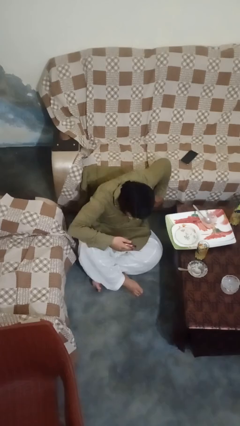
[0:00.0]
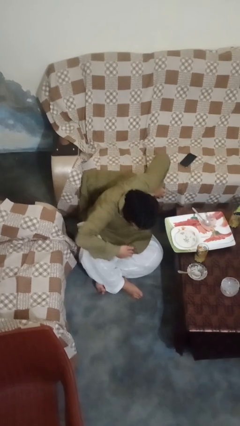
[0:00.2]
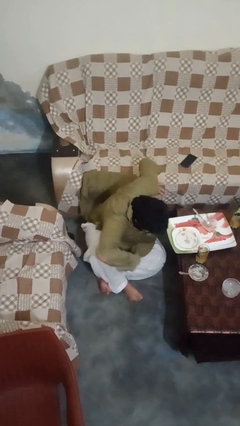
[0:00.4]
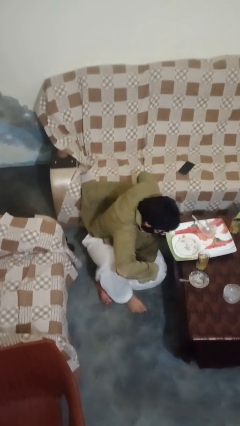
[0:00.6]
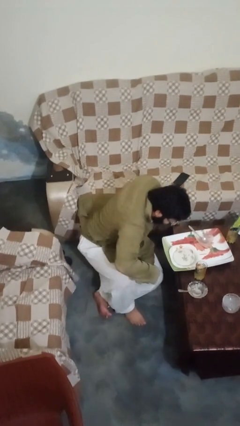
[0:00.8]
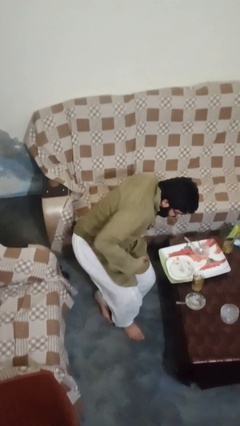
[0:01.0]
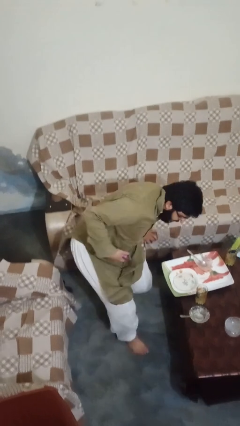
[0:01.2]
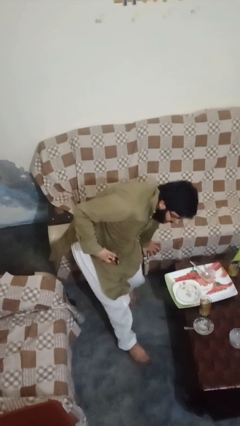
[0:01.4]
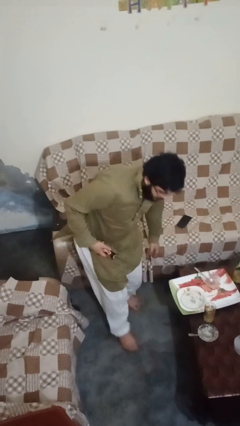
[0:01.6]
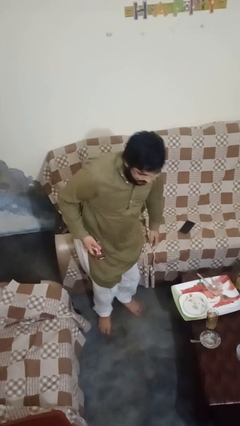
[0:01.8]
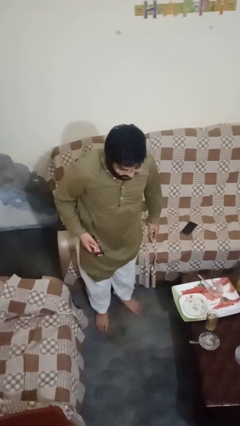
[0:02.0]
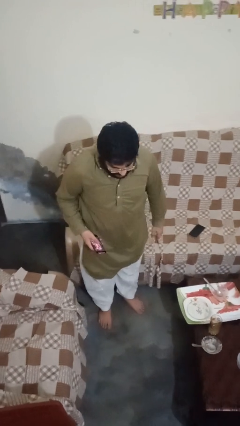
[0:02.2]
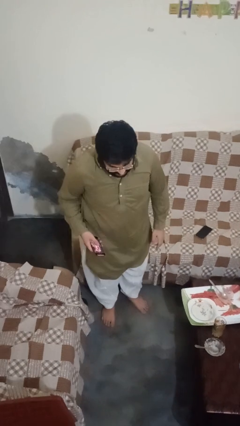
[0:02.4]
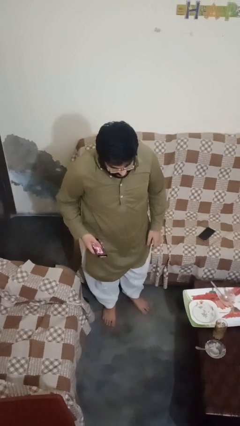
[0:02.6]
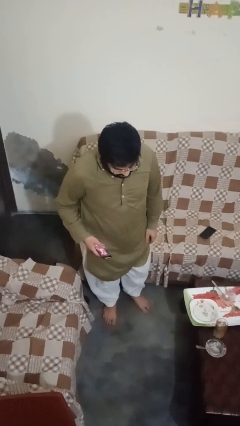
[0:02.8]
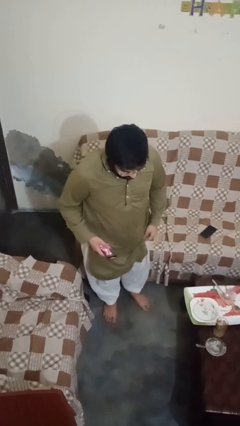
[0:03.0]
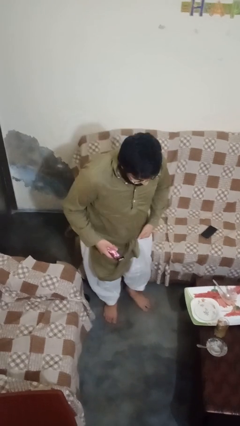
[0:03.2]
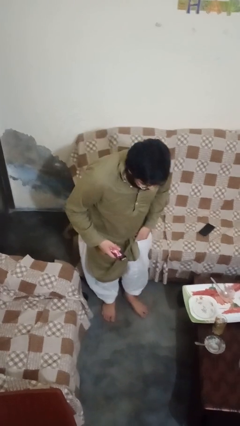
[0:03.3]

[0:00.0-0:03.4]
person stands up from floor

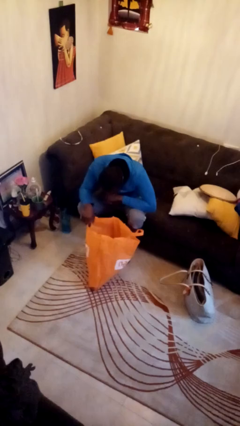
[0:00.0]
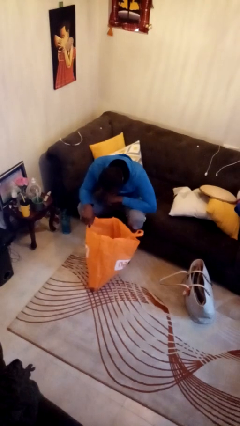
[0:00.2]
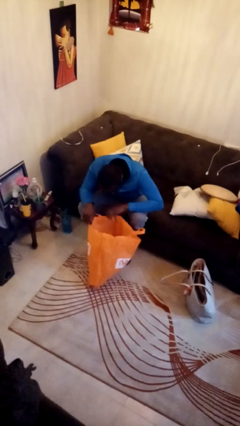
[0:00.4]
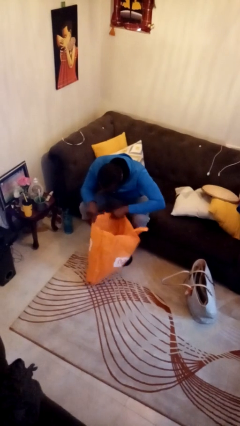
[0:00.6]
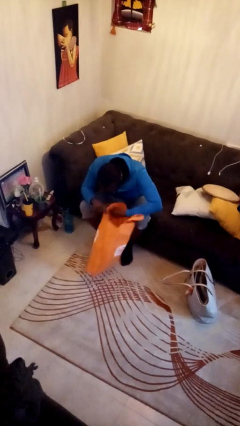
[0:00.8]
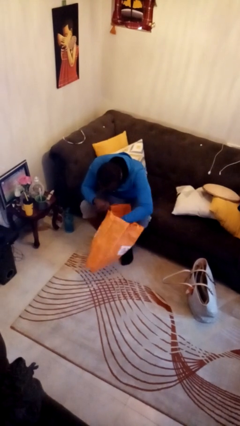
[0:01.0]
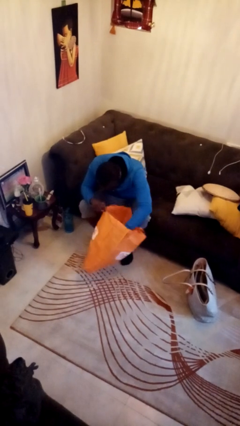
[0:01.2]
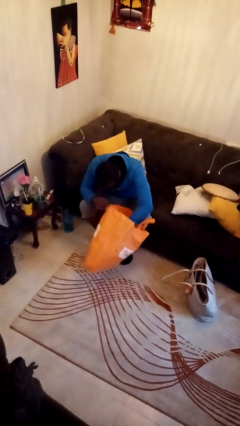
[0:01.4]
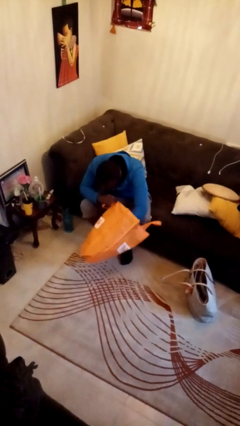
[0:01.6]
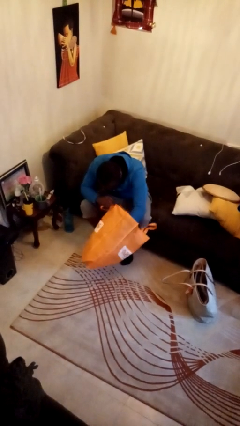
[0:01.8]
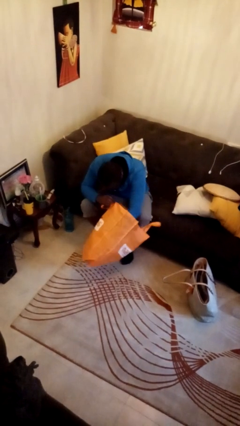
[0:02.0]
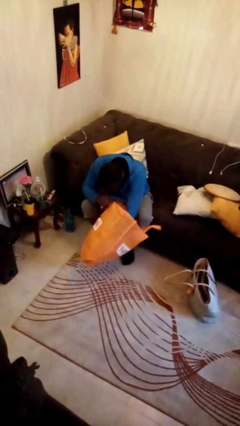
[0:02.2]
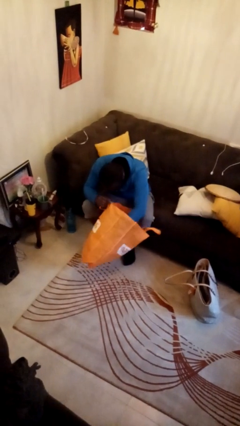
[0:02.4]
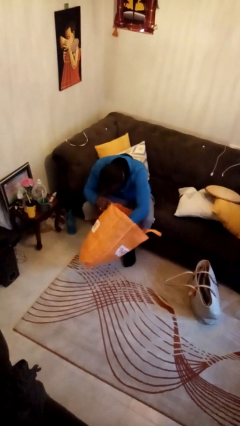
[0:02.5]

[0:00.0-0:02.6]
person searches in bag

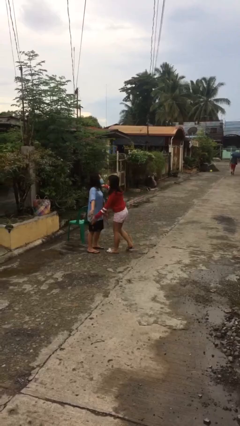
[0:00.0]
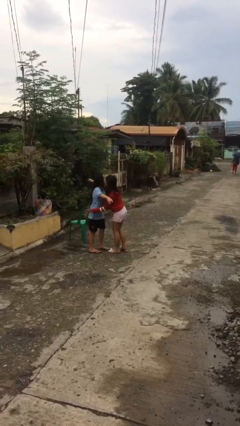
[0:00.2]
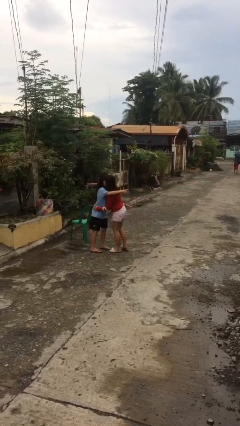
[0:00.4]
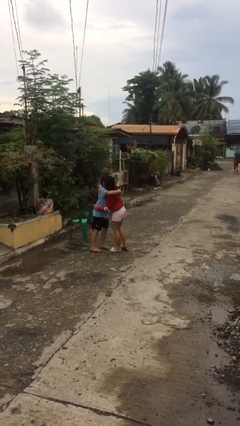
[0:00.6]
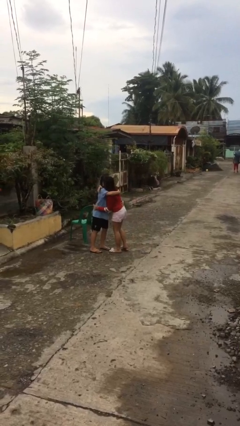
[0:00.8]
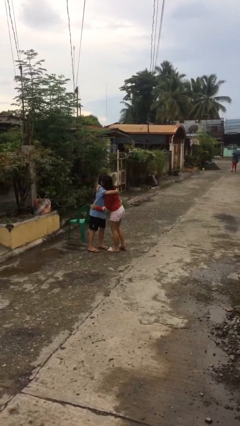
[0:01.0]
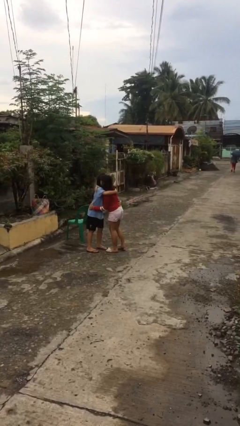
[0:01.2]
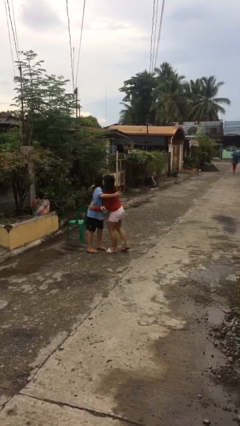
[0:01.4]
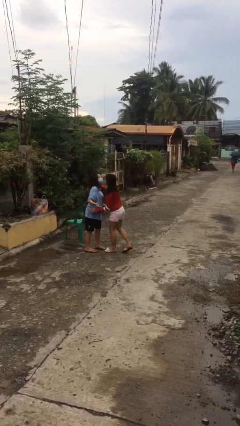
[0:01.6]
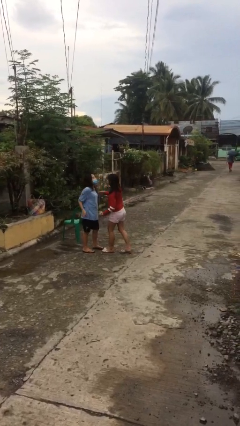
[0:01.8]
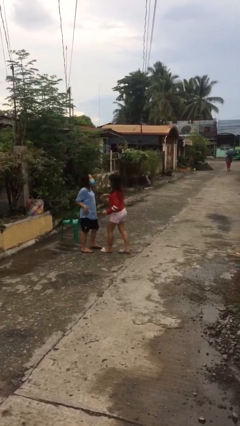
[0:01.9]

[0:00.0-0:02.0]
person embraces person

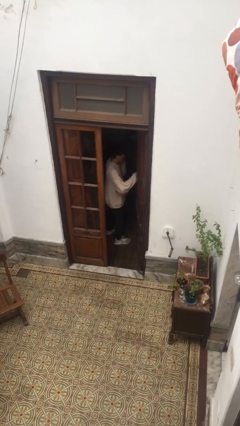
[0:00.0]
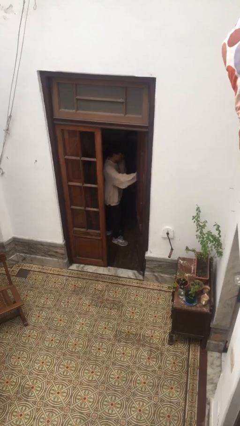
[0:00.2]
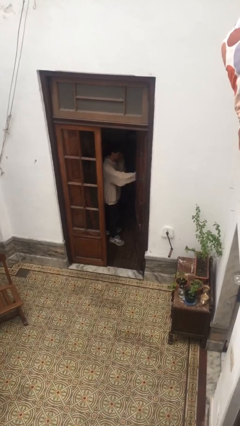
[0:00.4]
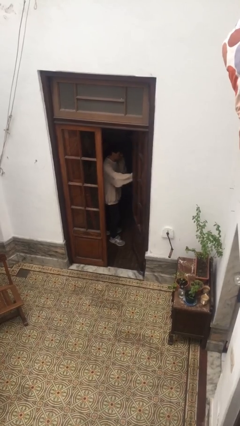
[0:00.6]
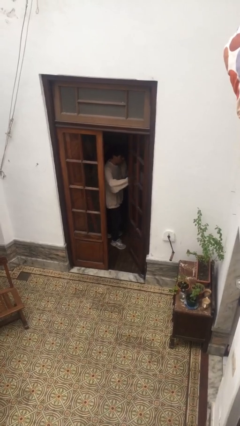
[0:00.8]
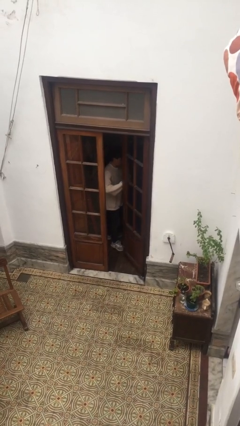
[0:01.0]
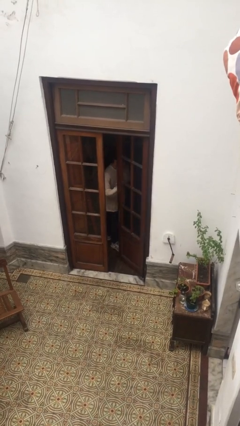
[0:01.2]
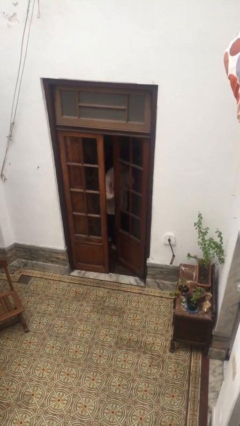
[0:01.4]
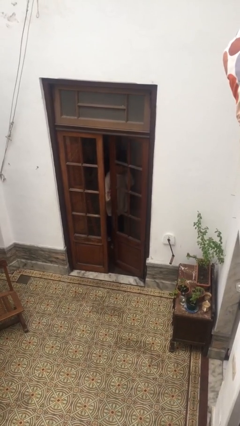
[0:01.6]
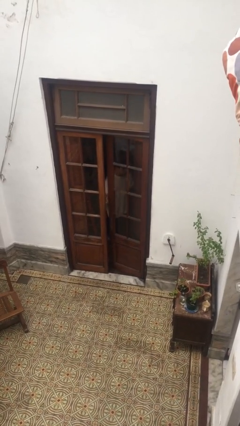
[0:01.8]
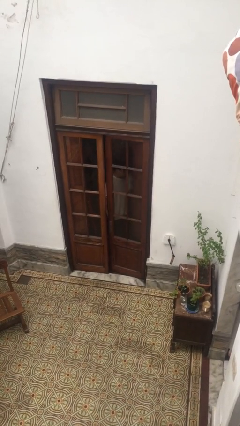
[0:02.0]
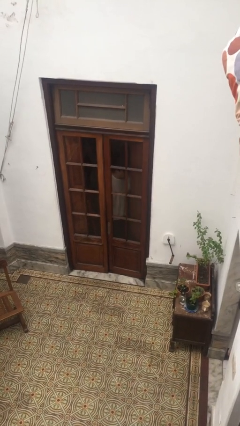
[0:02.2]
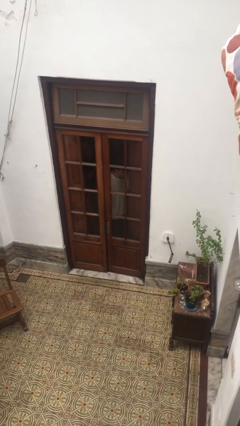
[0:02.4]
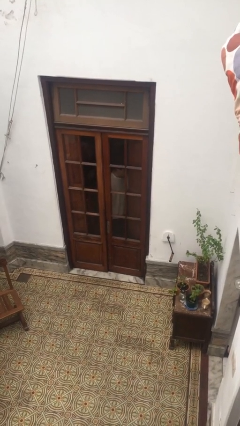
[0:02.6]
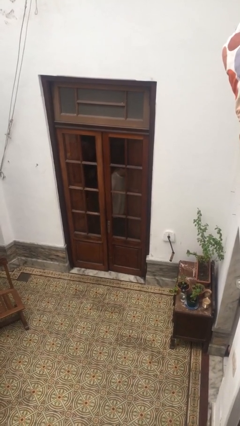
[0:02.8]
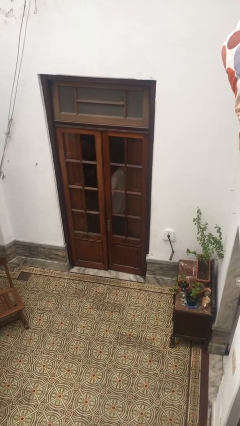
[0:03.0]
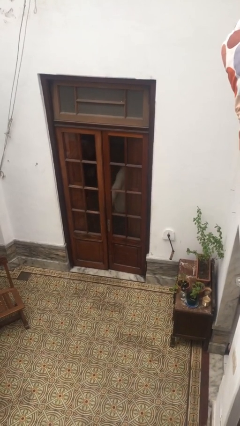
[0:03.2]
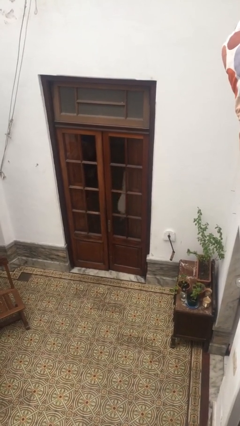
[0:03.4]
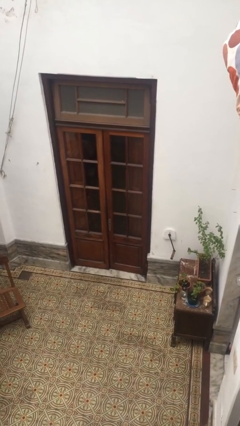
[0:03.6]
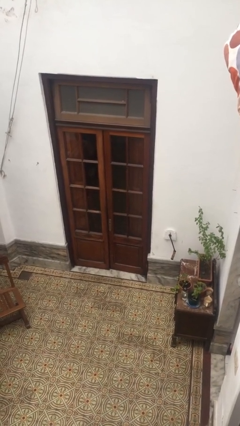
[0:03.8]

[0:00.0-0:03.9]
person closes facility door

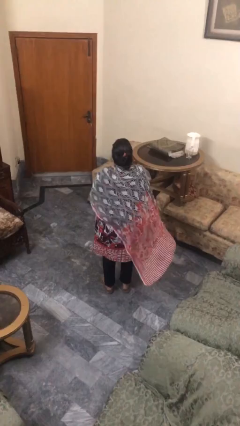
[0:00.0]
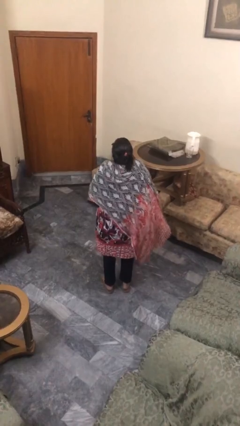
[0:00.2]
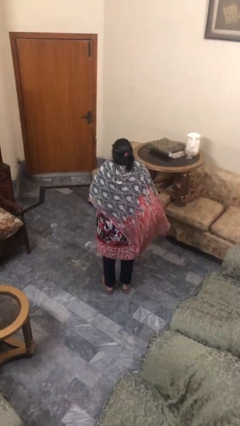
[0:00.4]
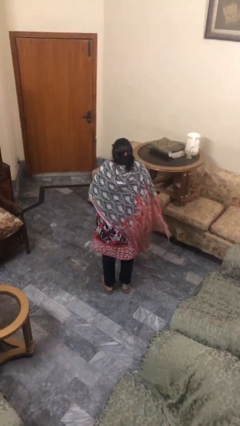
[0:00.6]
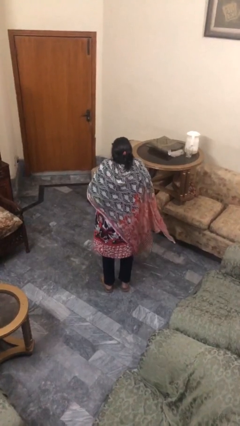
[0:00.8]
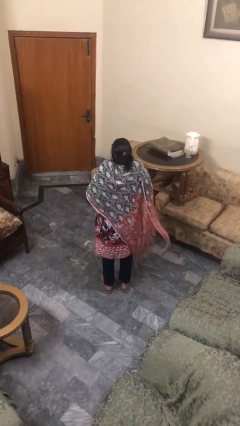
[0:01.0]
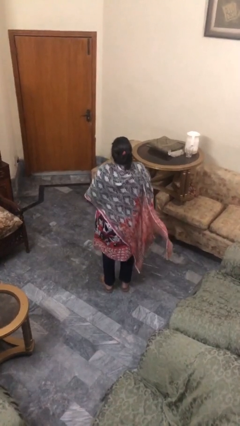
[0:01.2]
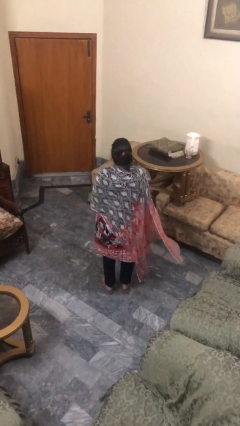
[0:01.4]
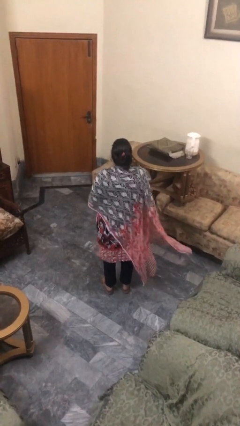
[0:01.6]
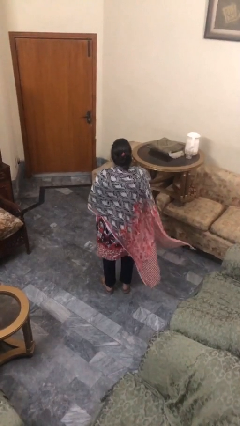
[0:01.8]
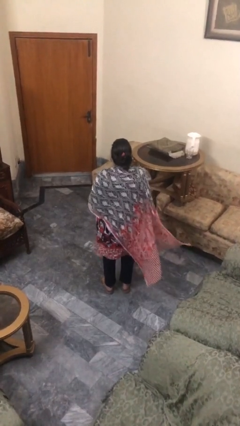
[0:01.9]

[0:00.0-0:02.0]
person shrugs

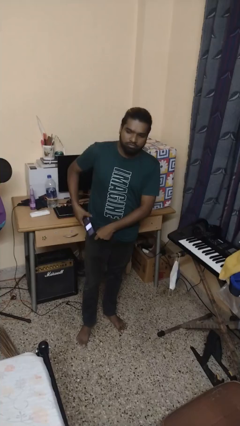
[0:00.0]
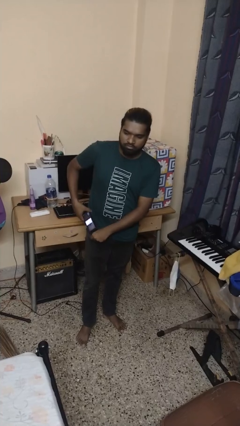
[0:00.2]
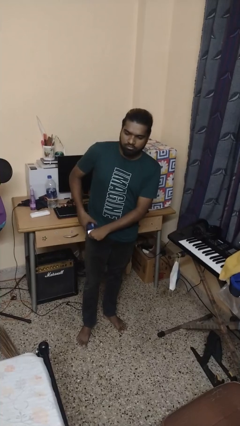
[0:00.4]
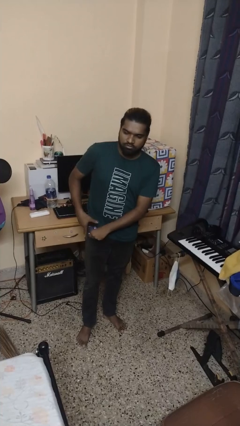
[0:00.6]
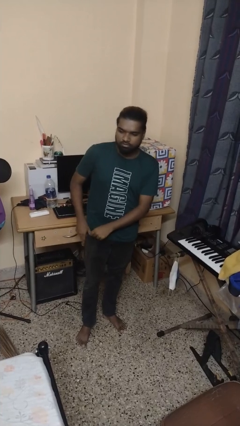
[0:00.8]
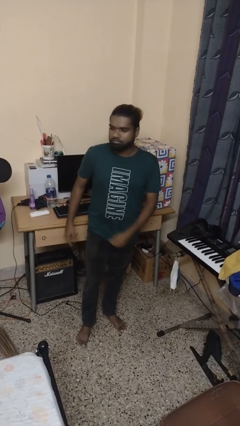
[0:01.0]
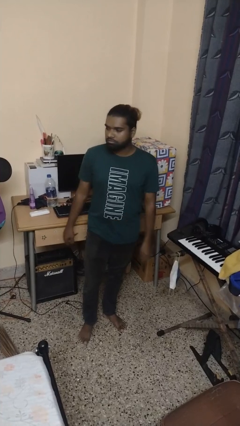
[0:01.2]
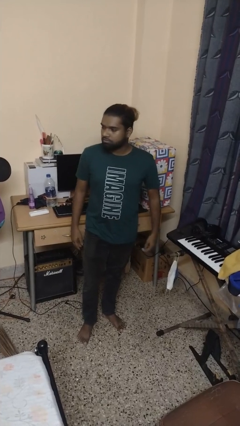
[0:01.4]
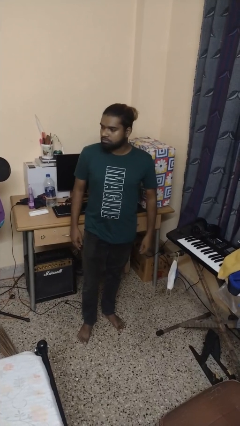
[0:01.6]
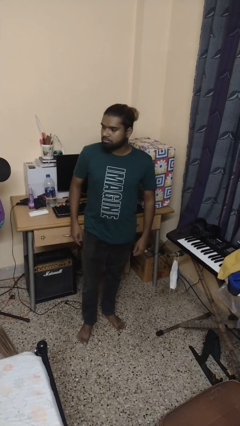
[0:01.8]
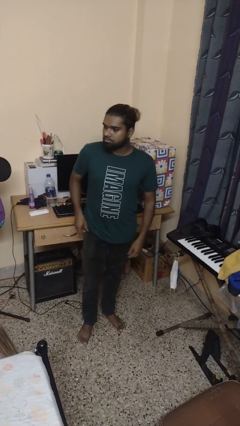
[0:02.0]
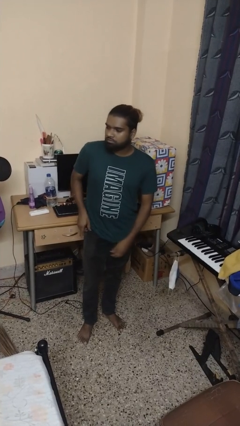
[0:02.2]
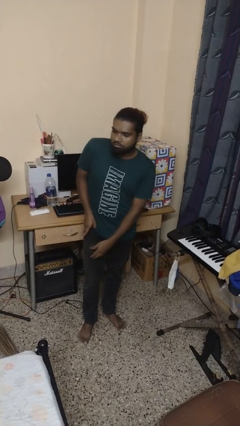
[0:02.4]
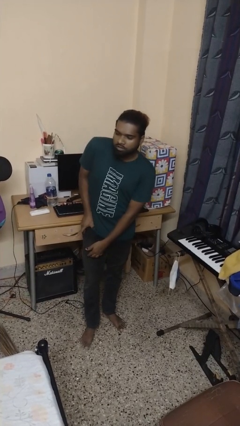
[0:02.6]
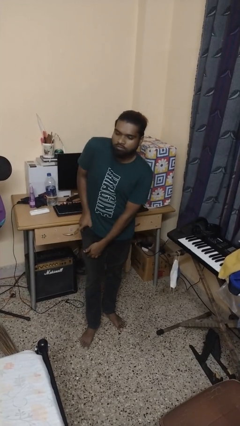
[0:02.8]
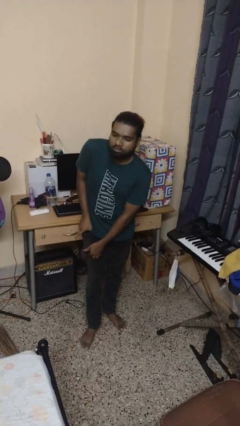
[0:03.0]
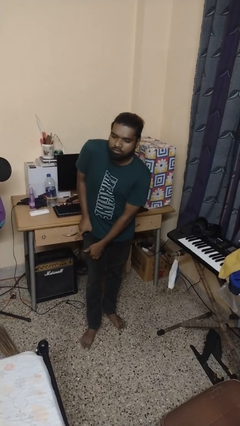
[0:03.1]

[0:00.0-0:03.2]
person puts phone into pocket

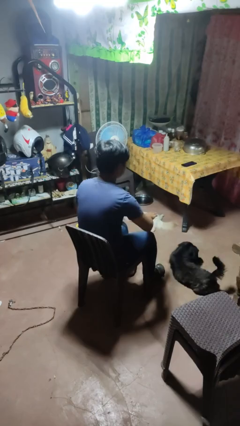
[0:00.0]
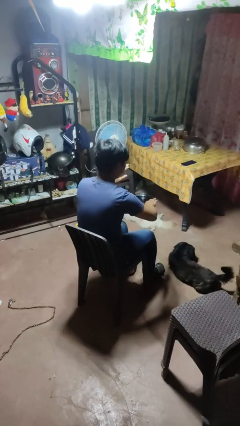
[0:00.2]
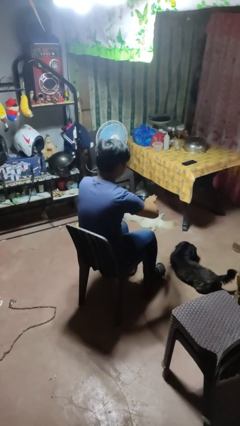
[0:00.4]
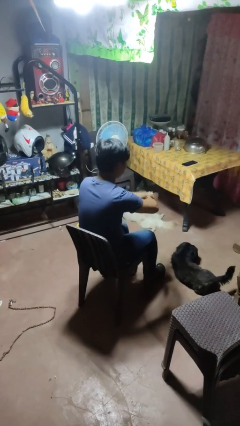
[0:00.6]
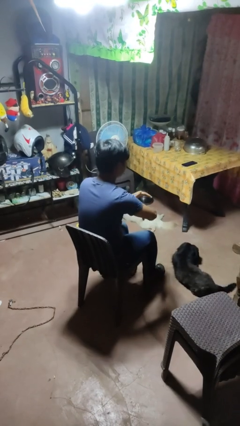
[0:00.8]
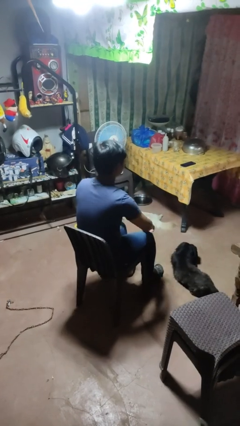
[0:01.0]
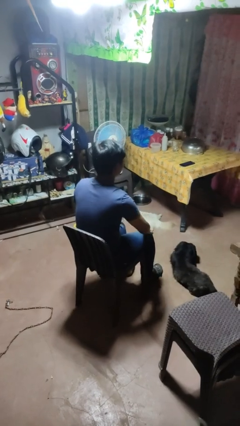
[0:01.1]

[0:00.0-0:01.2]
person swats bug
